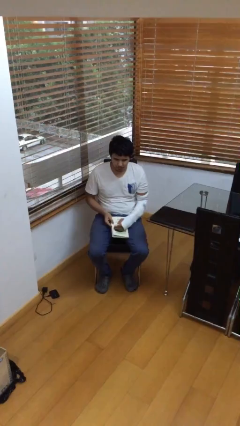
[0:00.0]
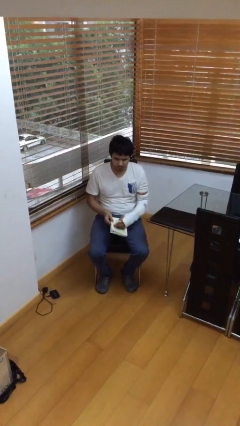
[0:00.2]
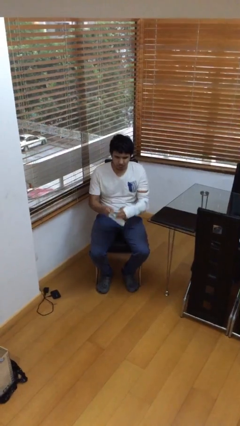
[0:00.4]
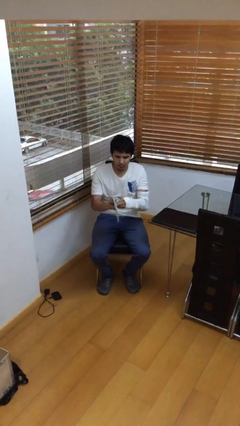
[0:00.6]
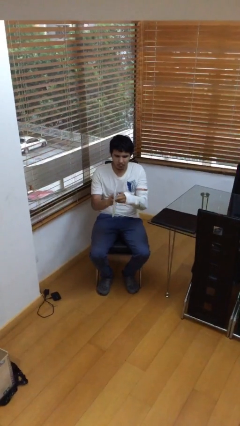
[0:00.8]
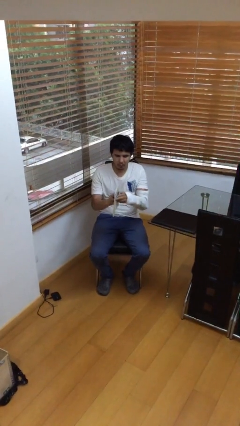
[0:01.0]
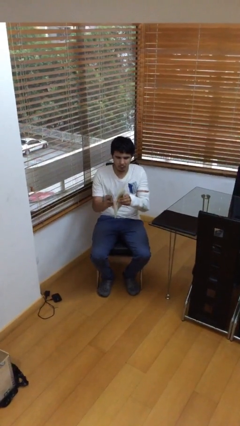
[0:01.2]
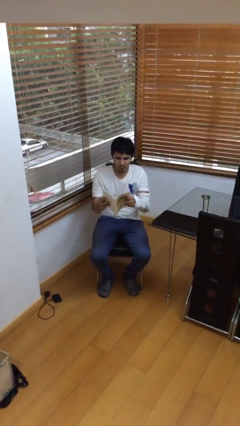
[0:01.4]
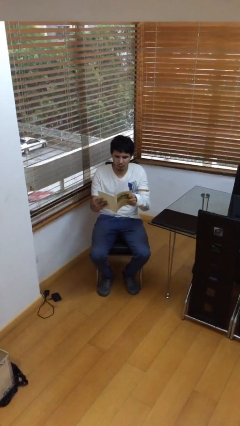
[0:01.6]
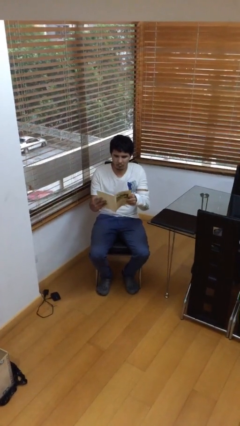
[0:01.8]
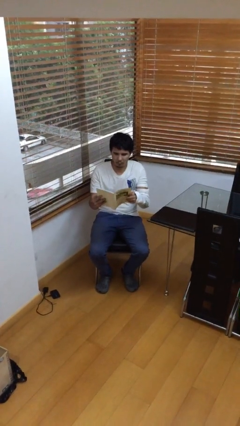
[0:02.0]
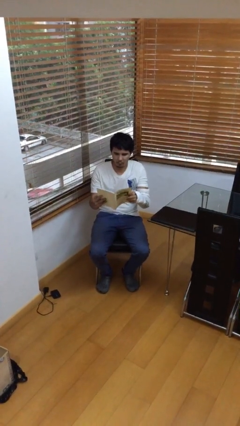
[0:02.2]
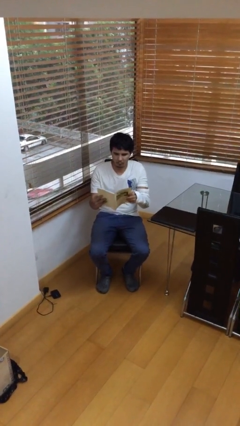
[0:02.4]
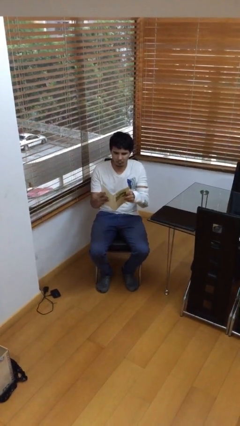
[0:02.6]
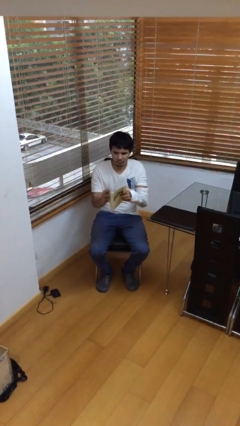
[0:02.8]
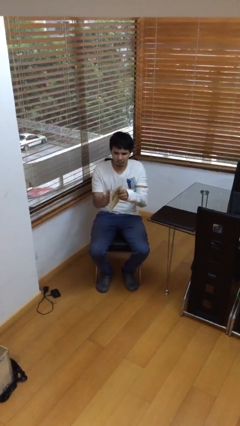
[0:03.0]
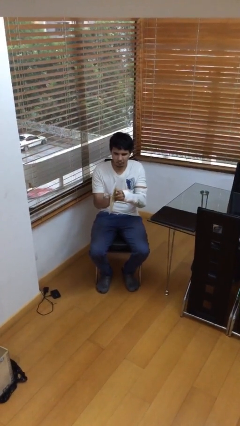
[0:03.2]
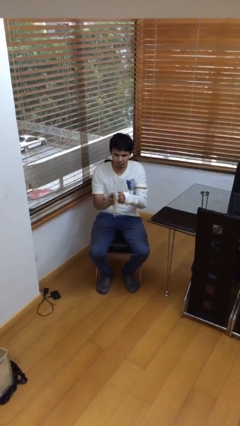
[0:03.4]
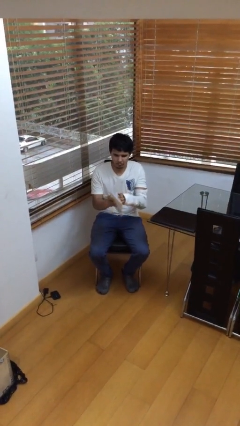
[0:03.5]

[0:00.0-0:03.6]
person reads document

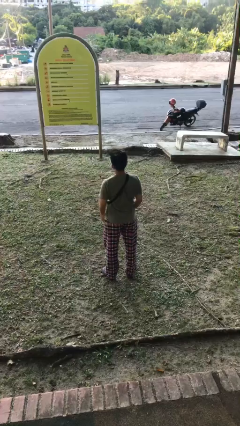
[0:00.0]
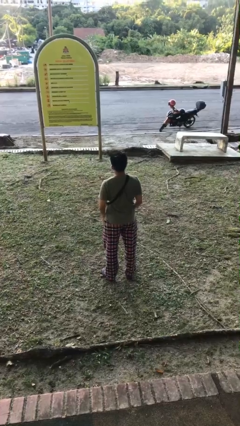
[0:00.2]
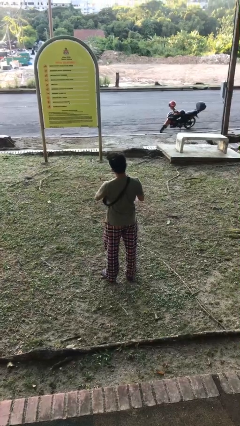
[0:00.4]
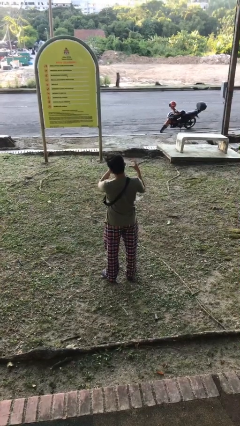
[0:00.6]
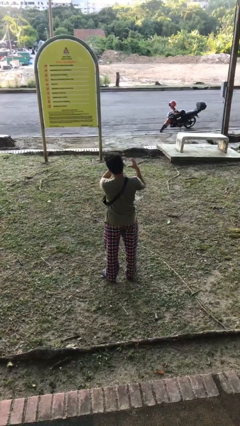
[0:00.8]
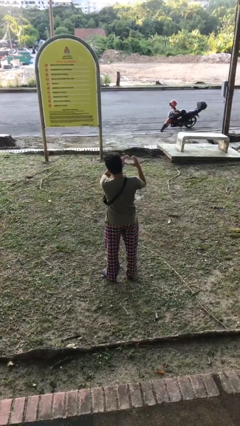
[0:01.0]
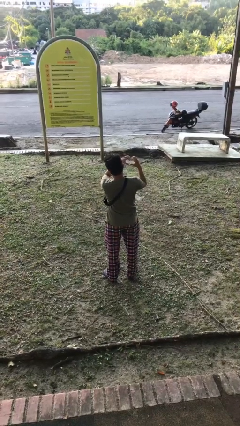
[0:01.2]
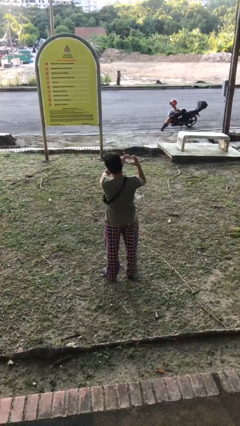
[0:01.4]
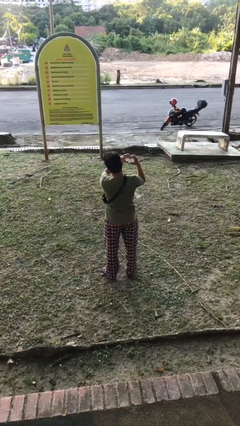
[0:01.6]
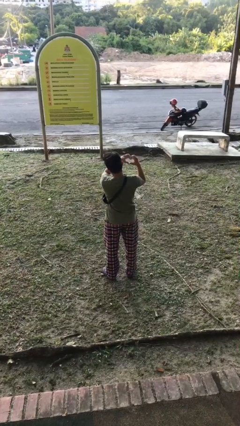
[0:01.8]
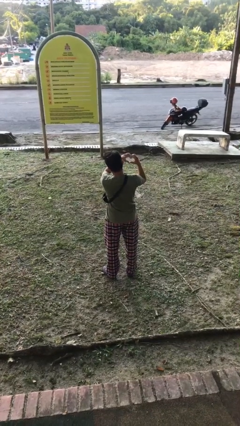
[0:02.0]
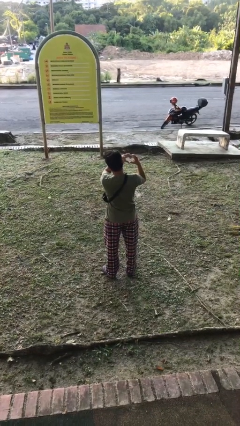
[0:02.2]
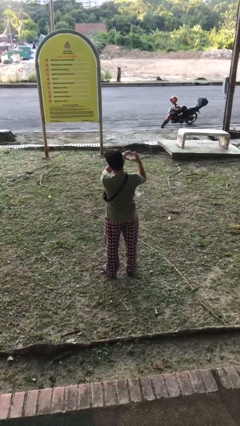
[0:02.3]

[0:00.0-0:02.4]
person gestures heart

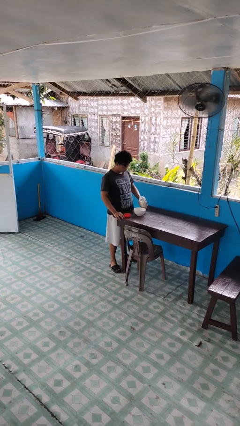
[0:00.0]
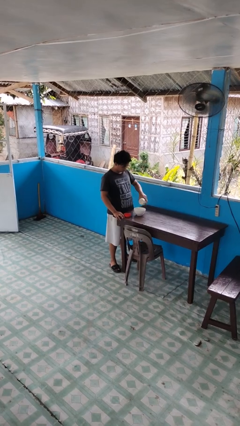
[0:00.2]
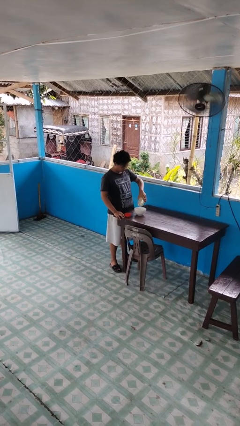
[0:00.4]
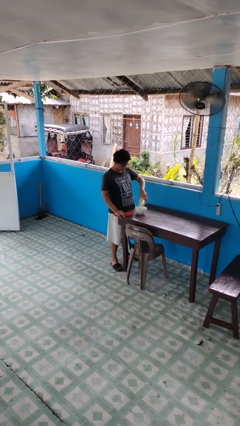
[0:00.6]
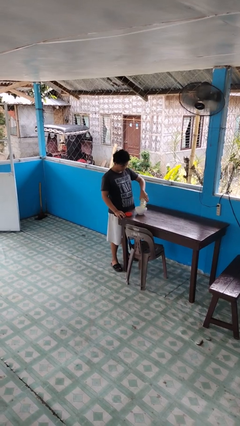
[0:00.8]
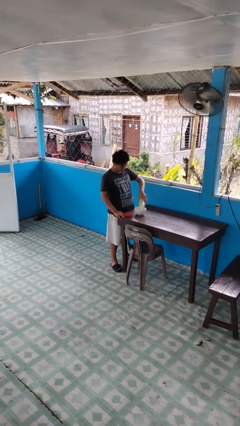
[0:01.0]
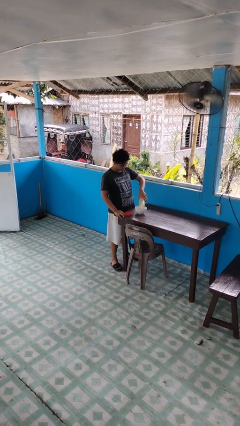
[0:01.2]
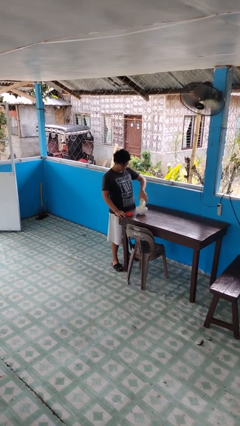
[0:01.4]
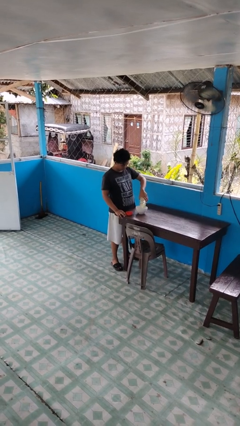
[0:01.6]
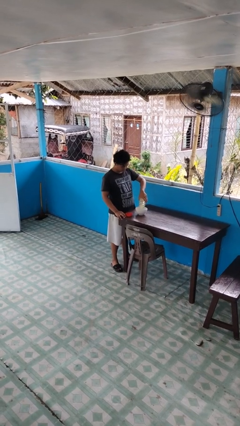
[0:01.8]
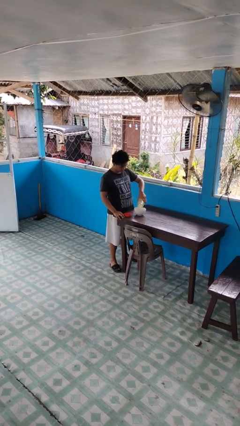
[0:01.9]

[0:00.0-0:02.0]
person pours into bowl

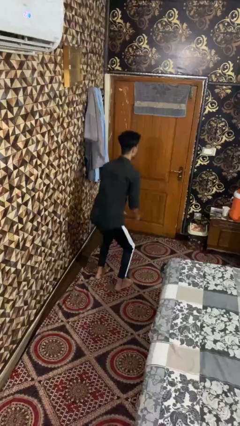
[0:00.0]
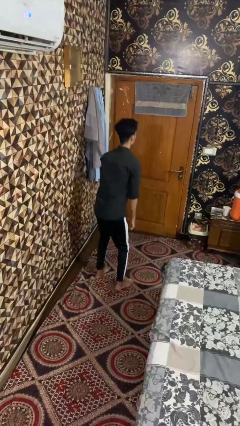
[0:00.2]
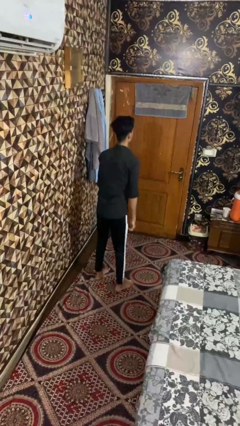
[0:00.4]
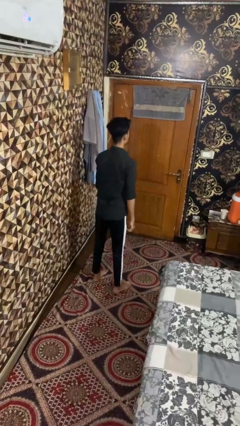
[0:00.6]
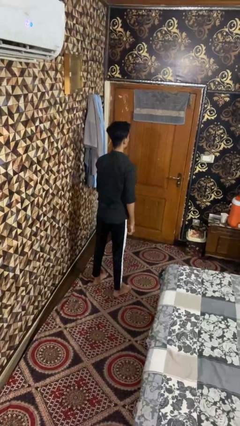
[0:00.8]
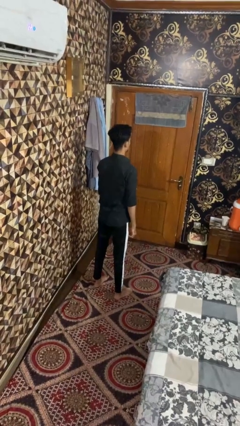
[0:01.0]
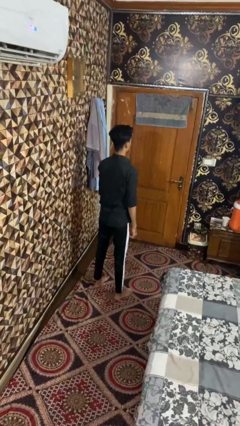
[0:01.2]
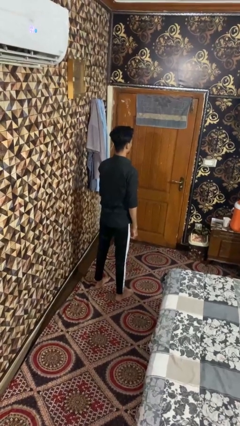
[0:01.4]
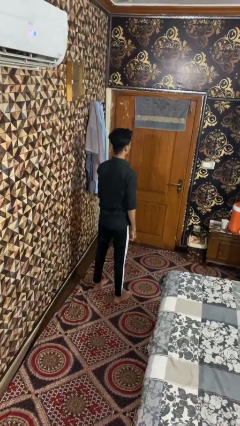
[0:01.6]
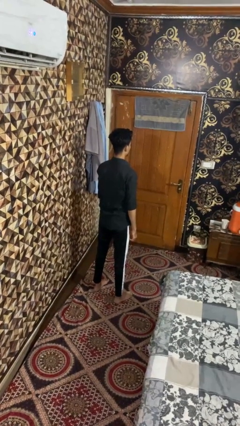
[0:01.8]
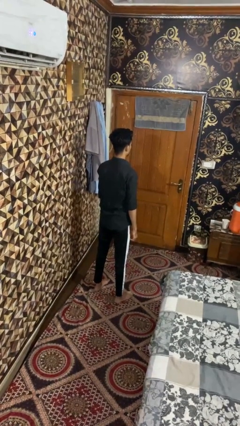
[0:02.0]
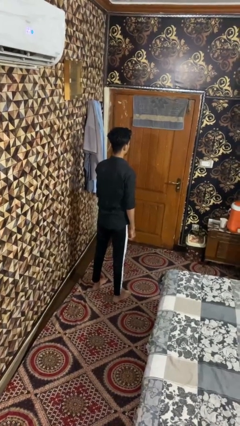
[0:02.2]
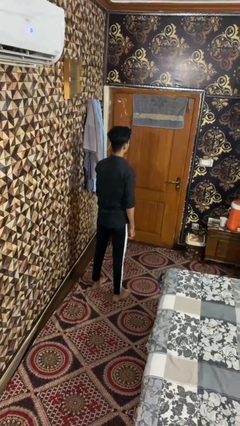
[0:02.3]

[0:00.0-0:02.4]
person stands up

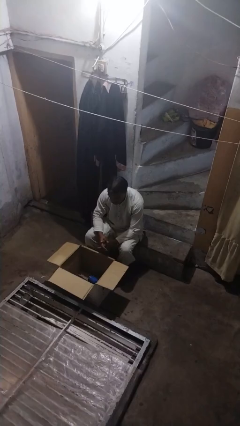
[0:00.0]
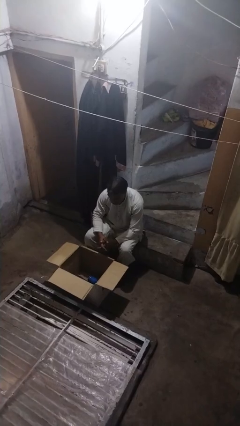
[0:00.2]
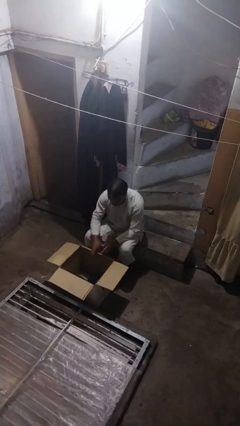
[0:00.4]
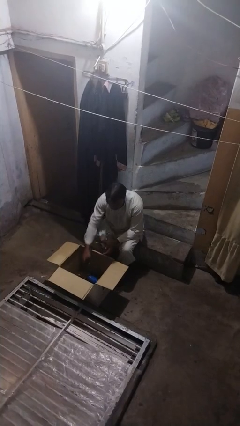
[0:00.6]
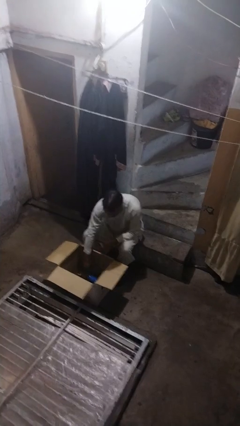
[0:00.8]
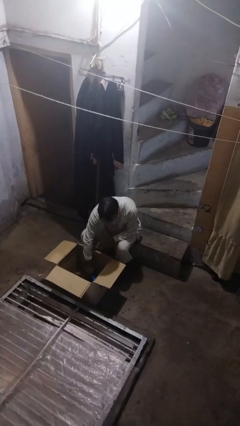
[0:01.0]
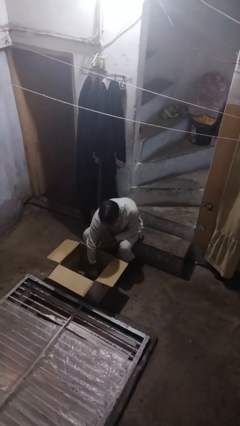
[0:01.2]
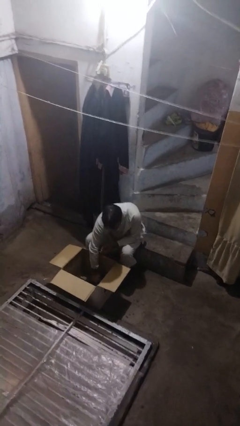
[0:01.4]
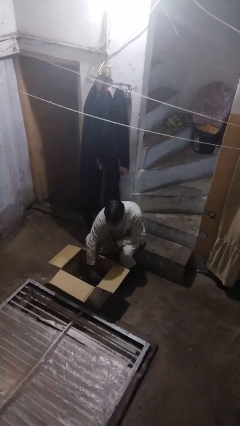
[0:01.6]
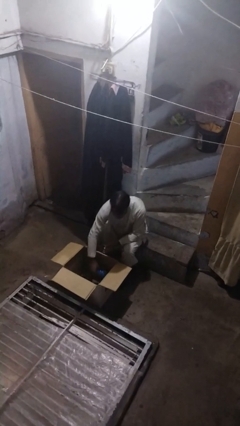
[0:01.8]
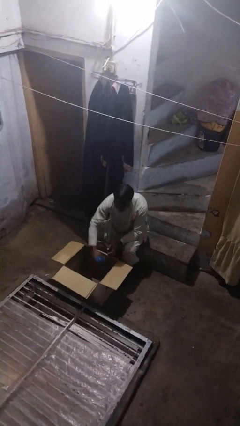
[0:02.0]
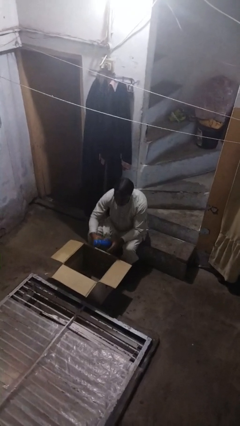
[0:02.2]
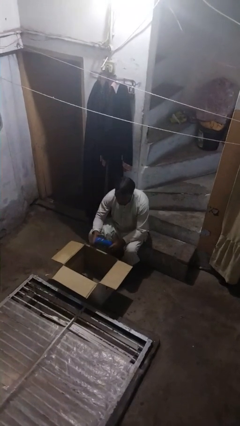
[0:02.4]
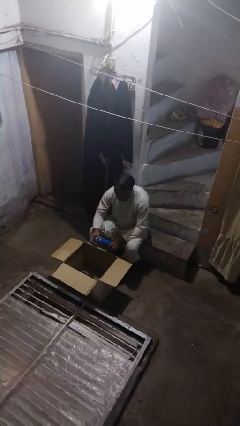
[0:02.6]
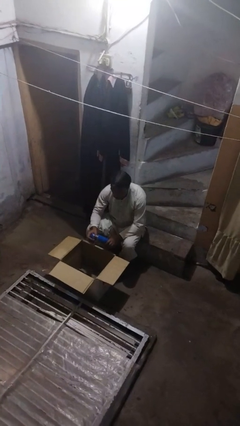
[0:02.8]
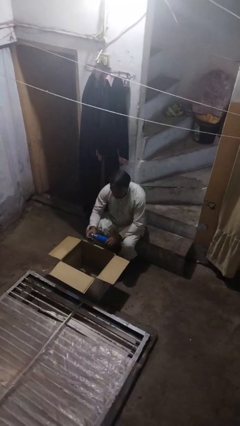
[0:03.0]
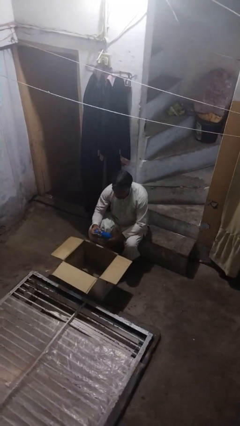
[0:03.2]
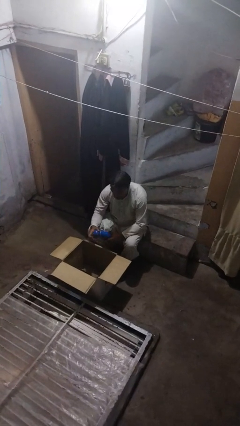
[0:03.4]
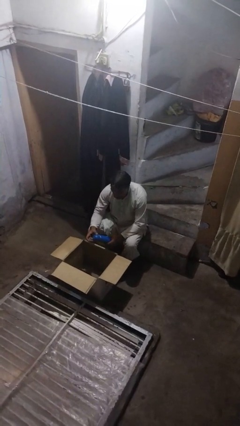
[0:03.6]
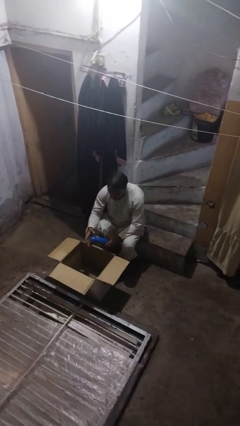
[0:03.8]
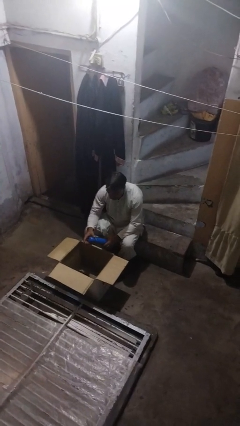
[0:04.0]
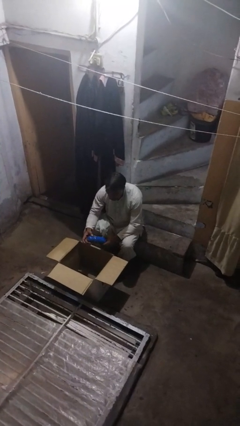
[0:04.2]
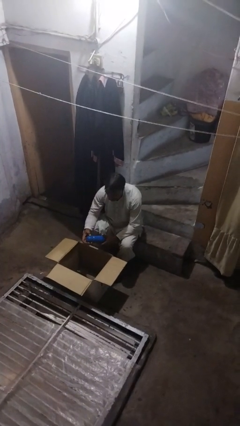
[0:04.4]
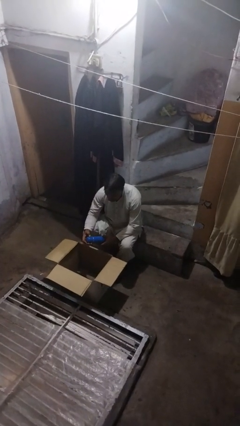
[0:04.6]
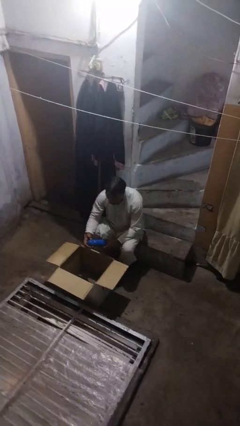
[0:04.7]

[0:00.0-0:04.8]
person takes object from box

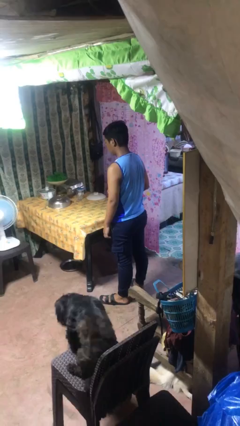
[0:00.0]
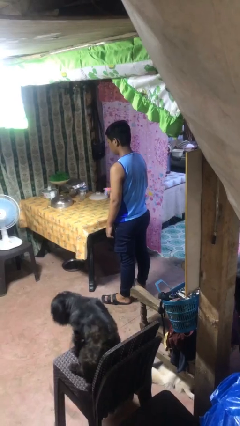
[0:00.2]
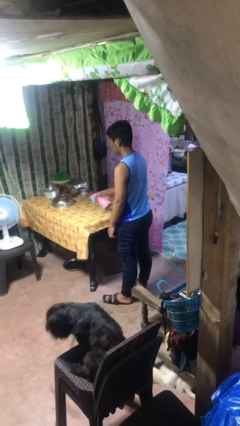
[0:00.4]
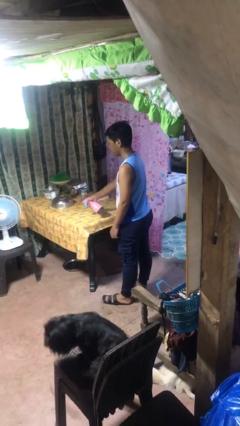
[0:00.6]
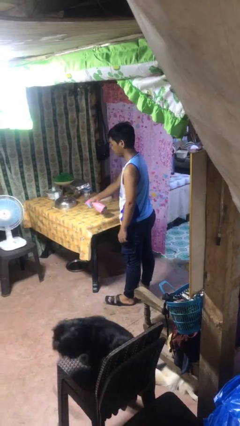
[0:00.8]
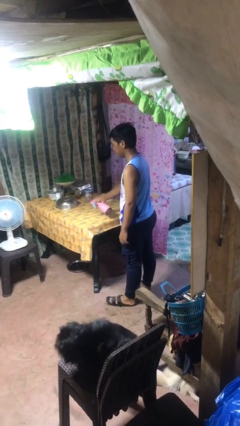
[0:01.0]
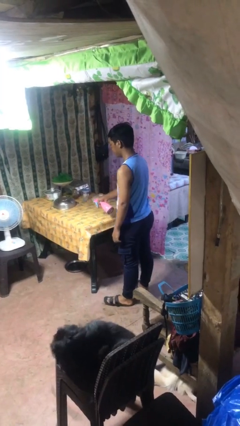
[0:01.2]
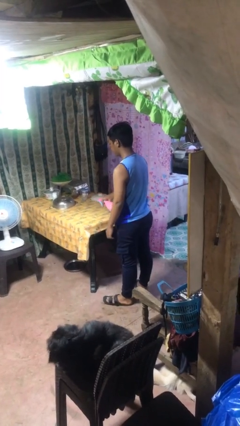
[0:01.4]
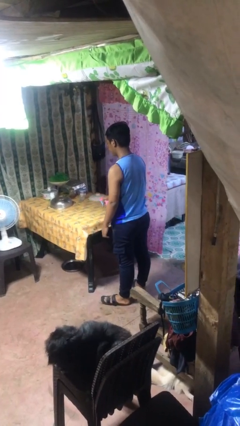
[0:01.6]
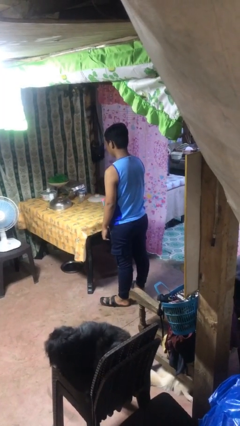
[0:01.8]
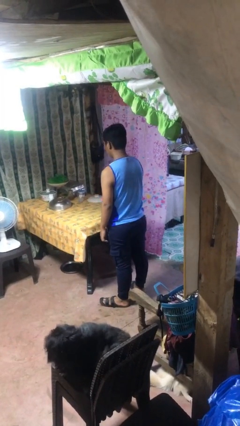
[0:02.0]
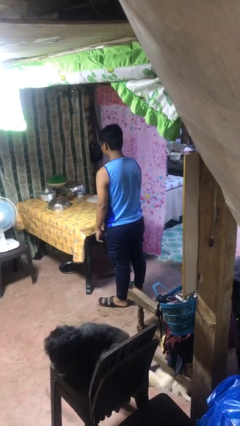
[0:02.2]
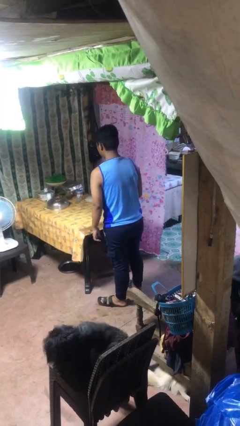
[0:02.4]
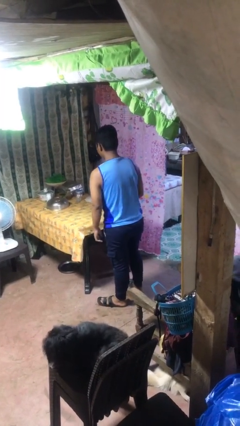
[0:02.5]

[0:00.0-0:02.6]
person sprays from bottle
